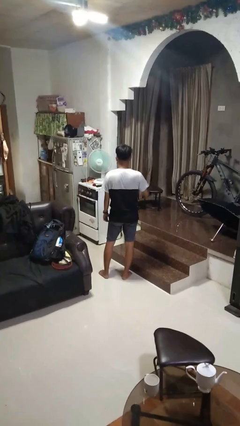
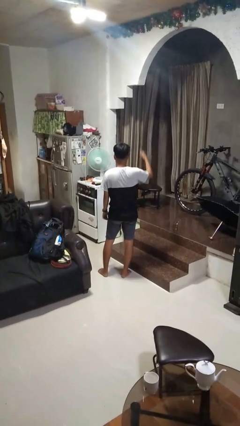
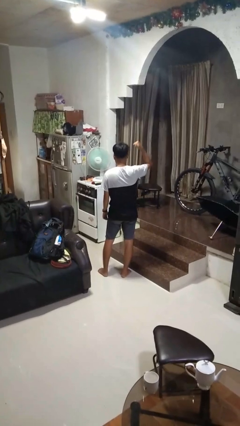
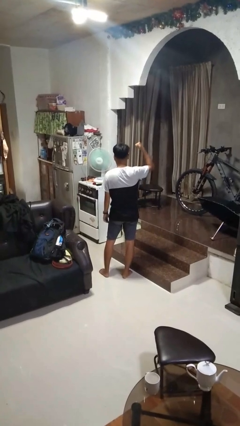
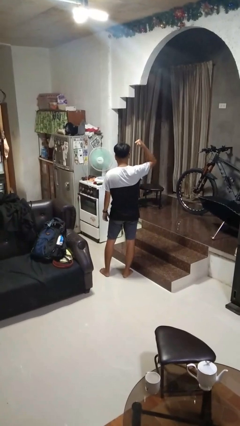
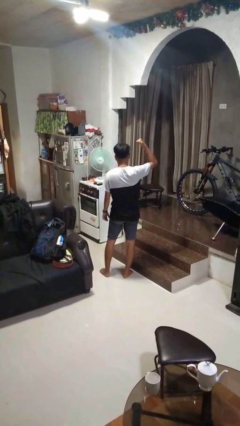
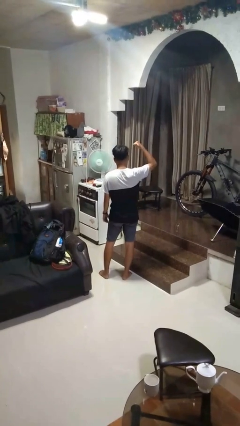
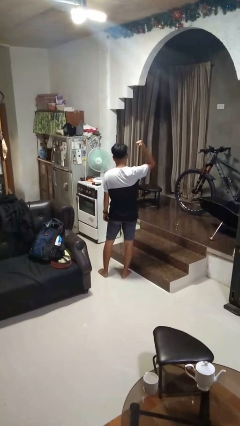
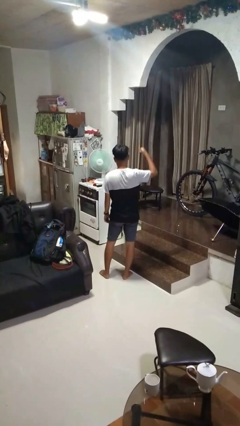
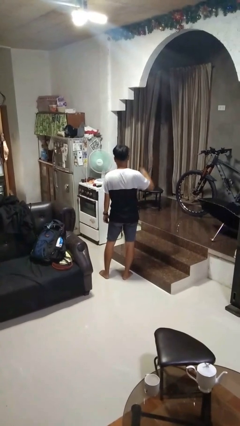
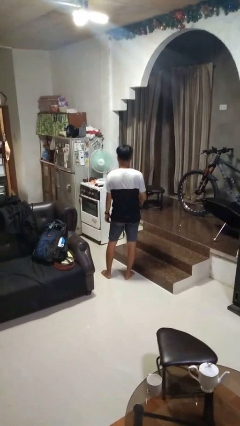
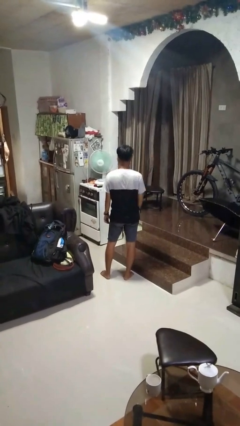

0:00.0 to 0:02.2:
person gestures behind me

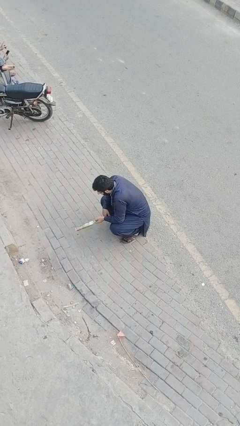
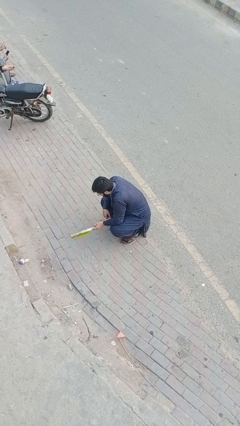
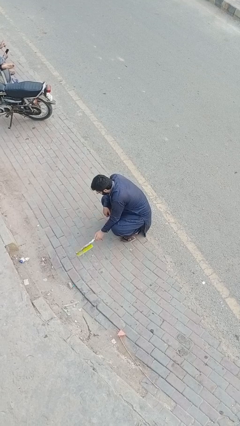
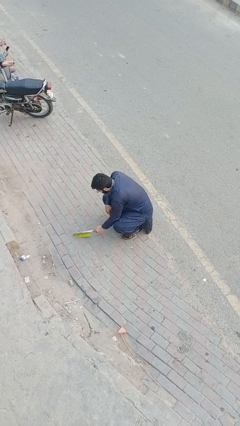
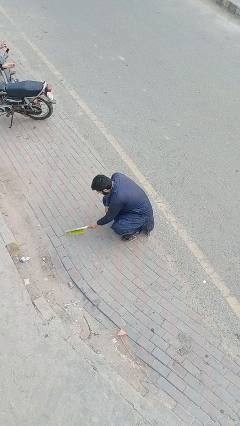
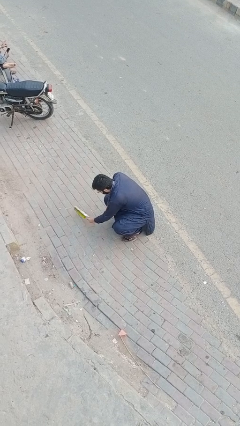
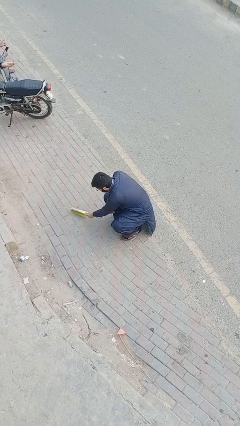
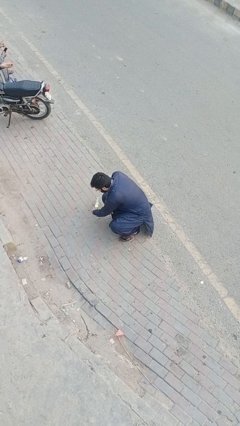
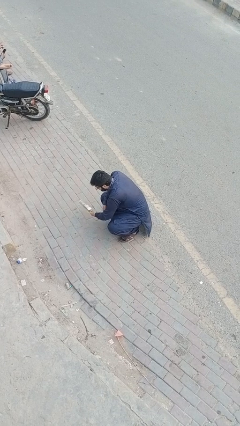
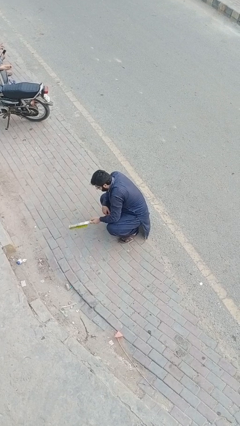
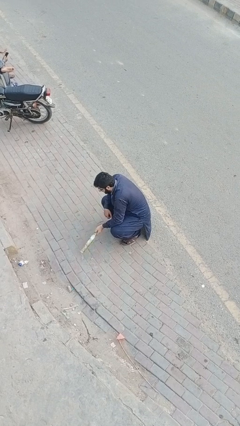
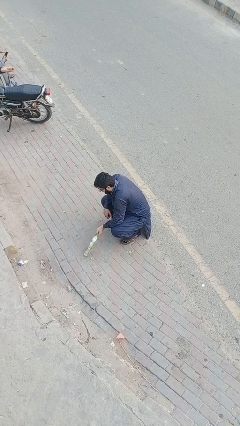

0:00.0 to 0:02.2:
person sweeps floor

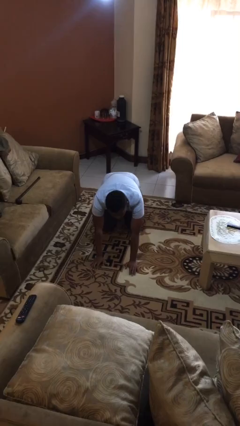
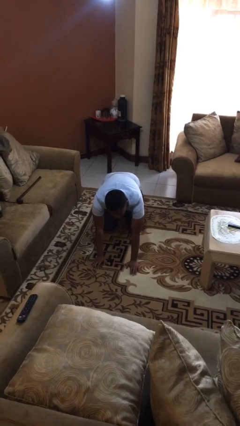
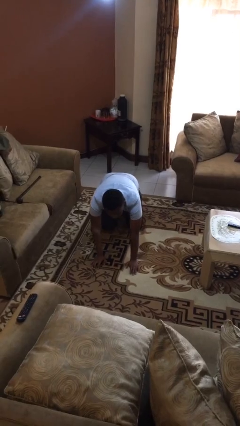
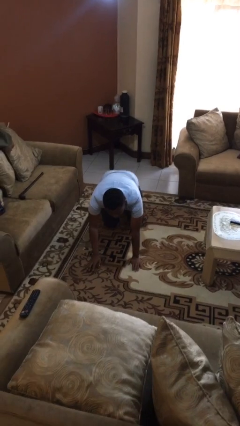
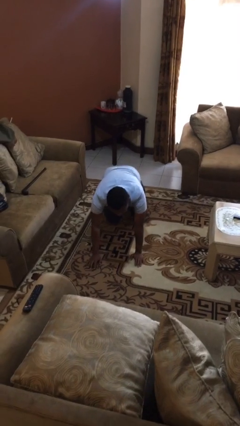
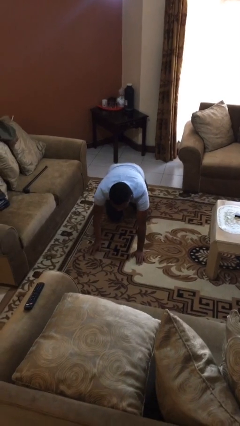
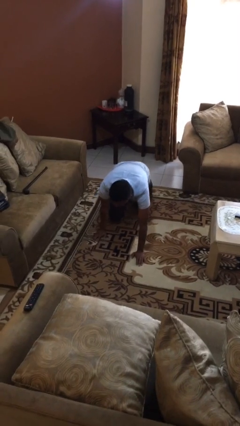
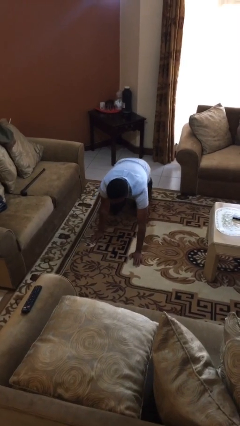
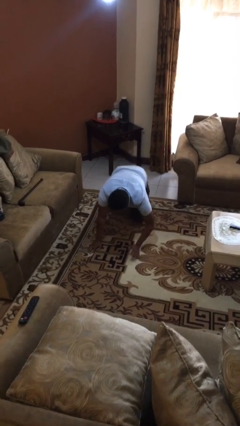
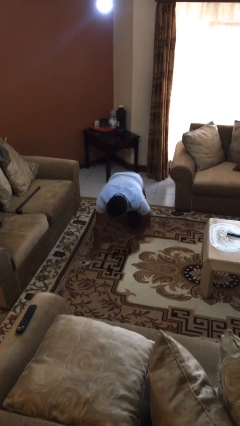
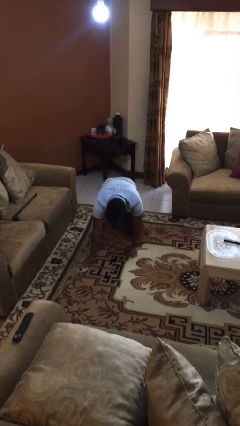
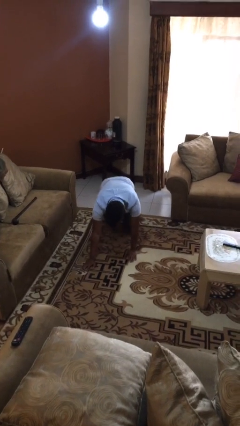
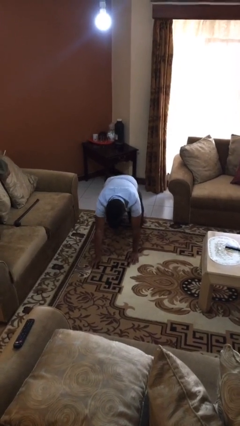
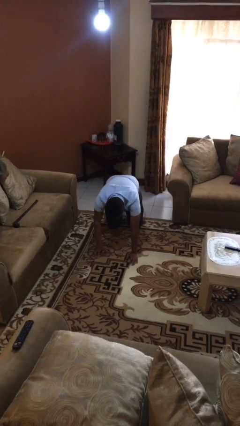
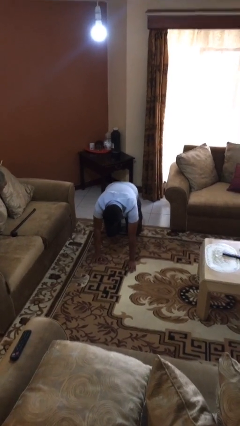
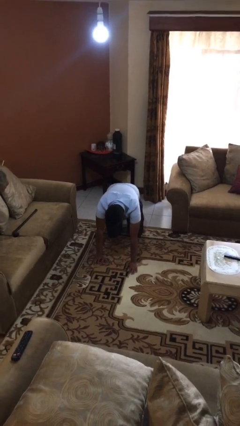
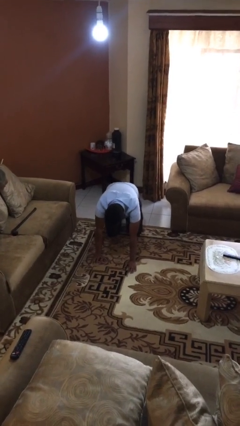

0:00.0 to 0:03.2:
person crawls

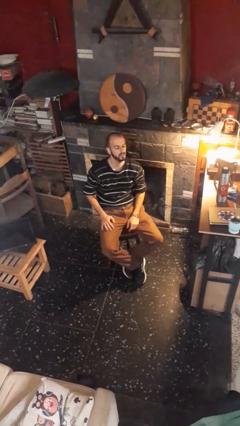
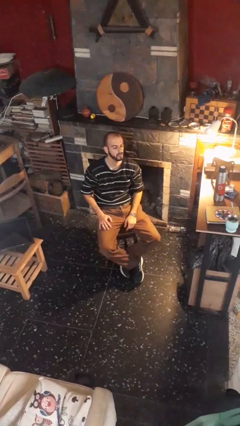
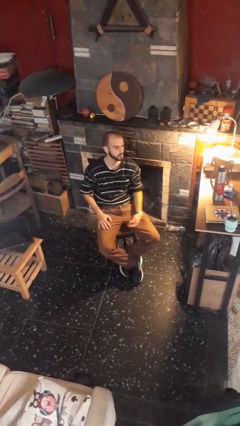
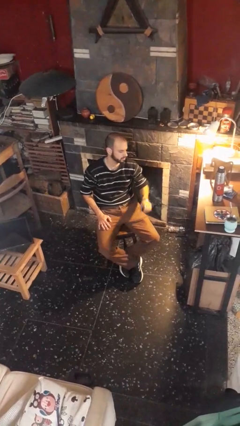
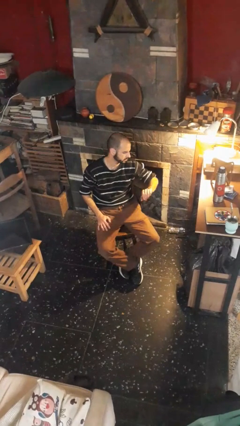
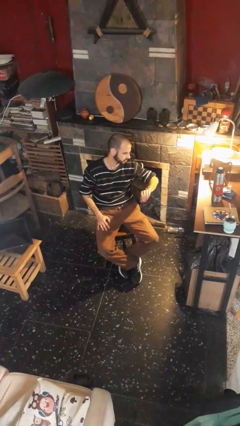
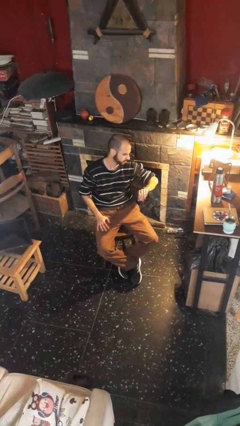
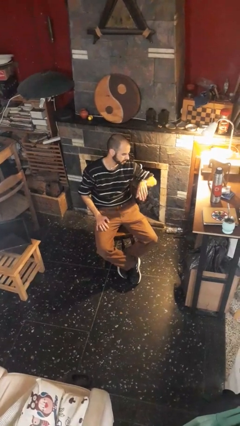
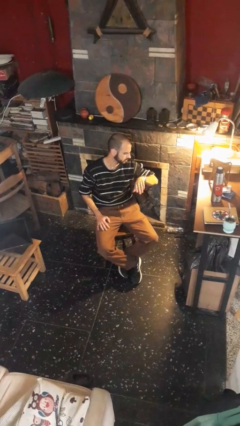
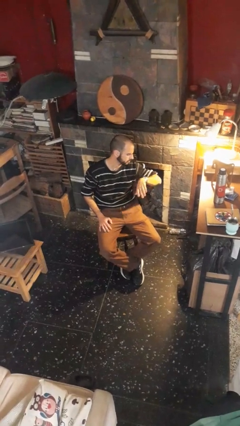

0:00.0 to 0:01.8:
person looks at wristwatch

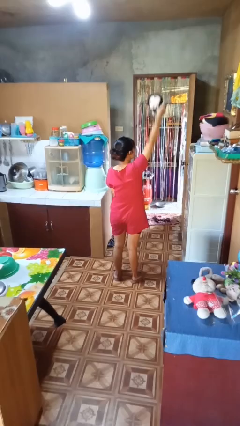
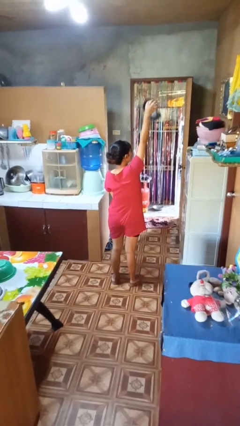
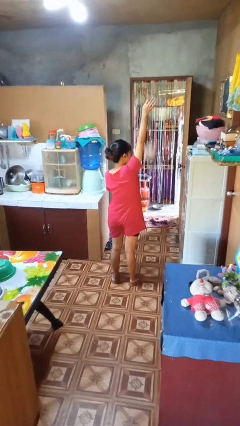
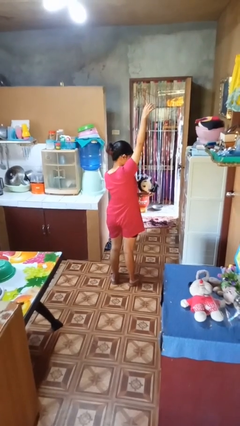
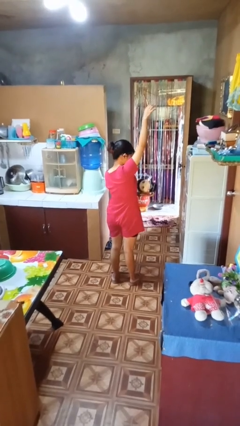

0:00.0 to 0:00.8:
person drops object

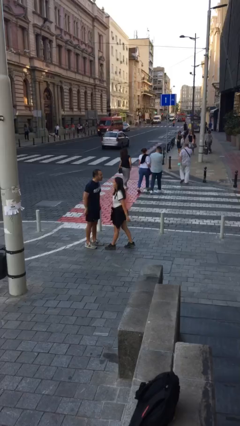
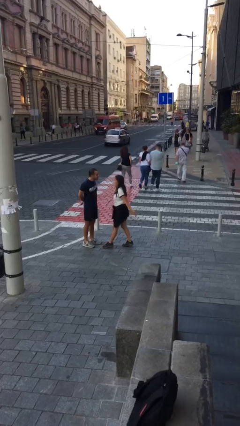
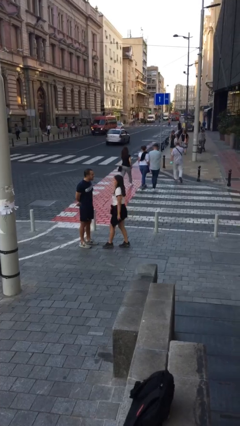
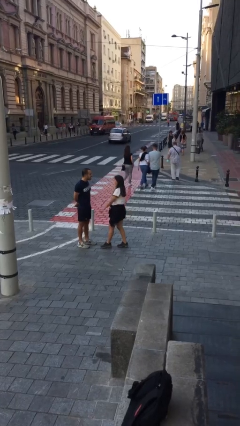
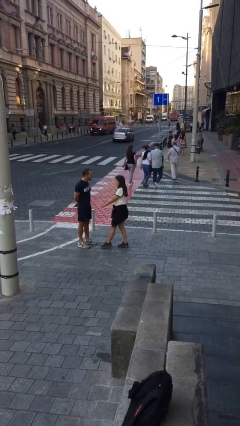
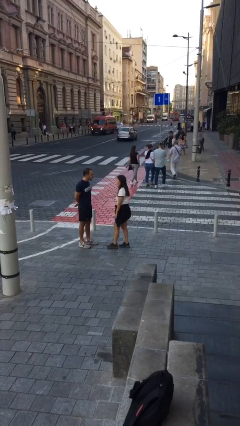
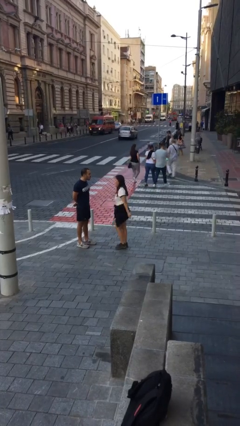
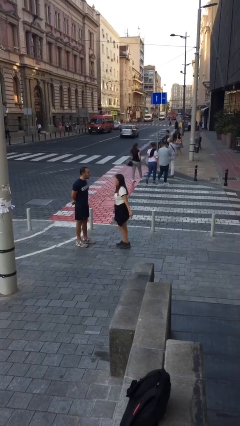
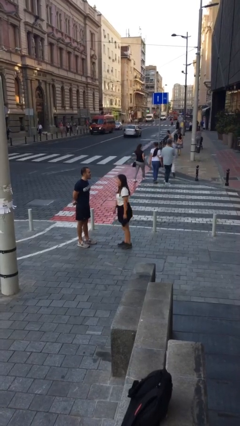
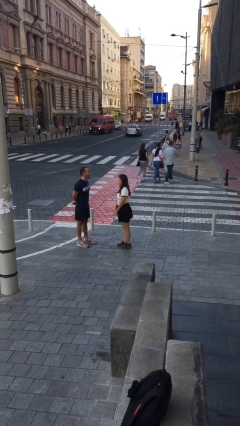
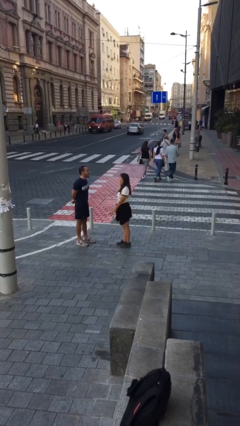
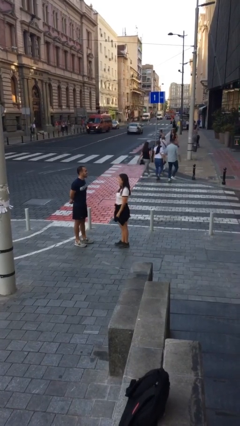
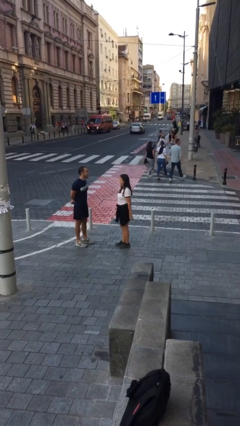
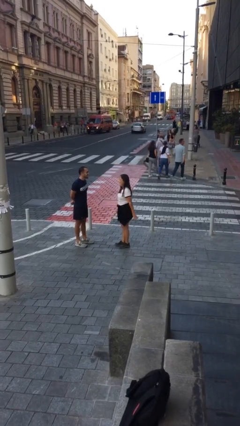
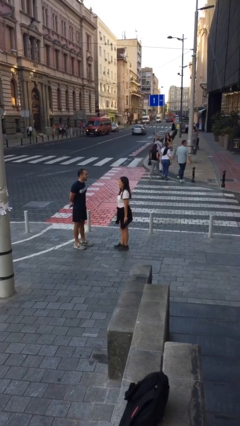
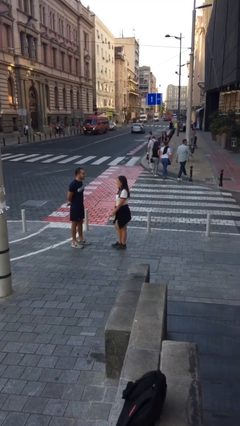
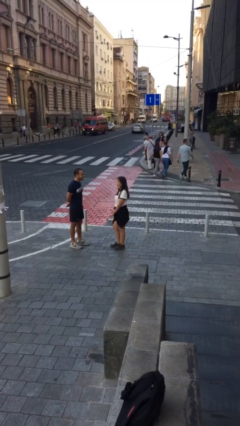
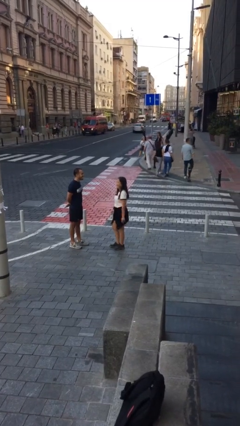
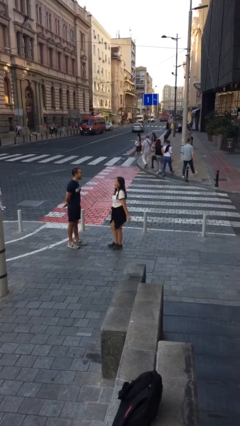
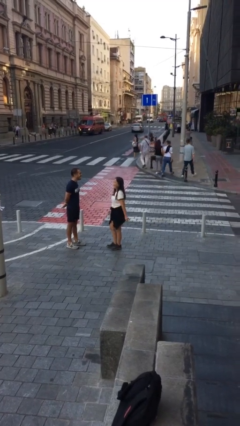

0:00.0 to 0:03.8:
person talks to person

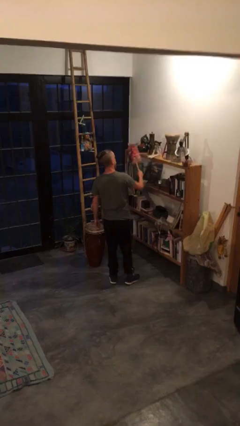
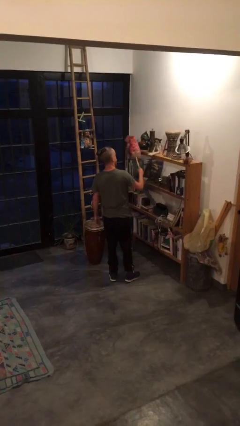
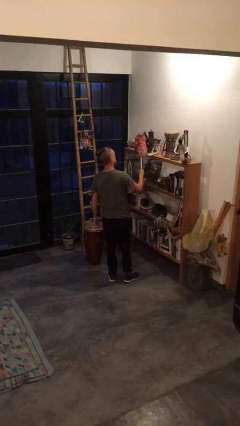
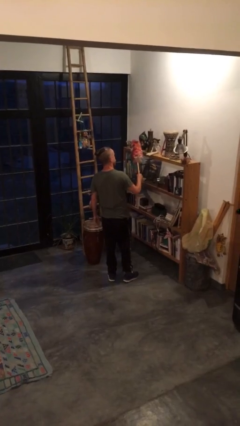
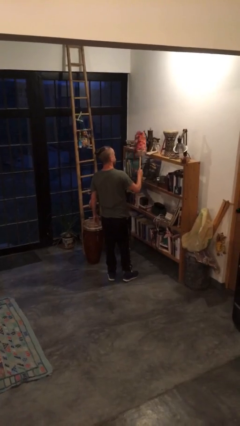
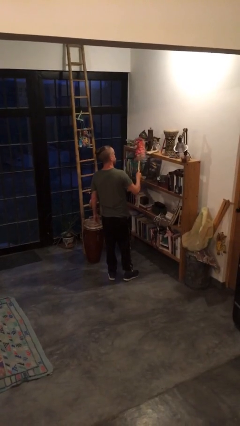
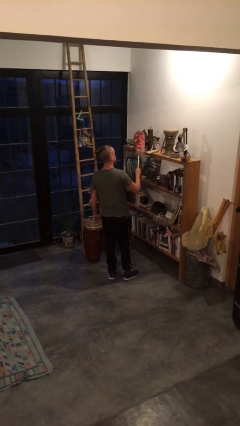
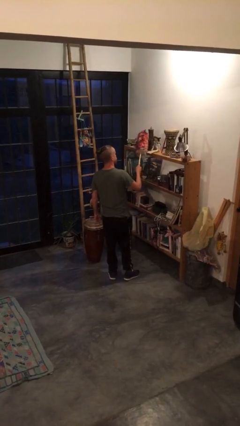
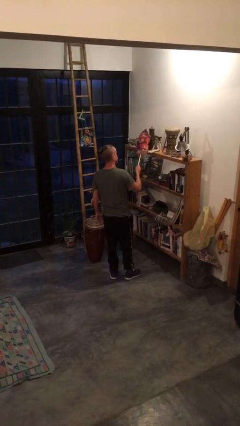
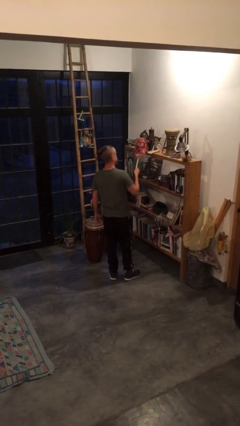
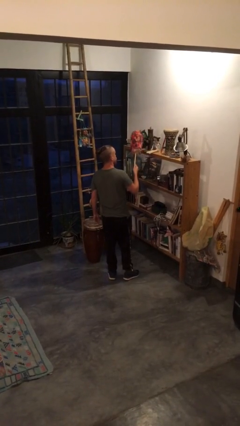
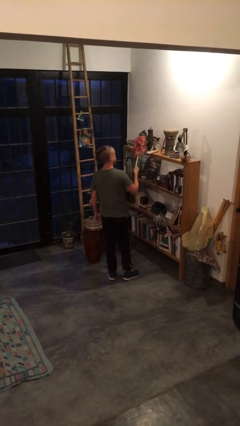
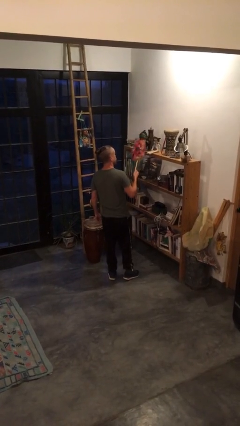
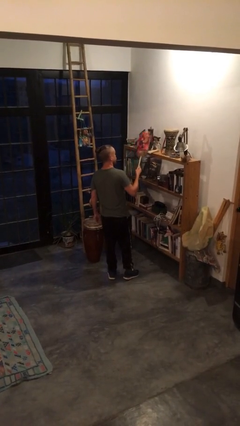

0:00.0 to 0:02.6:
person dusts furniture
